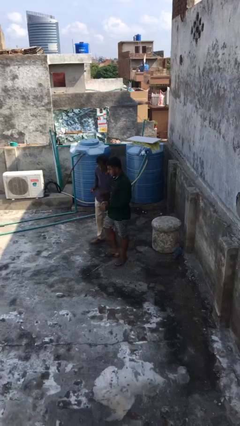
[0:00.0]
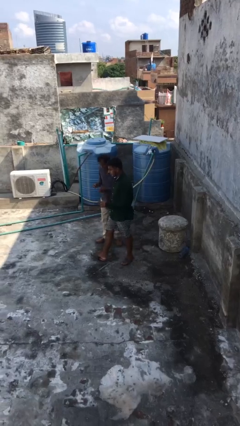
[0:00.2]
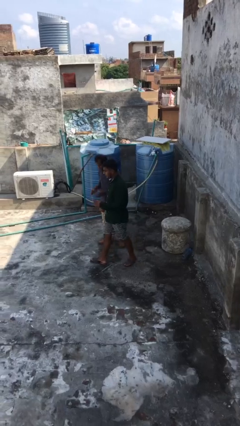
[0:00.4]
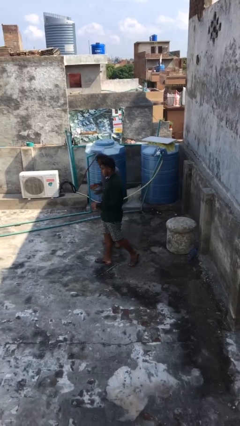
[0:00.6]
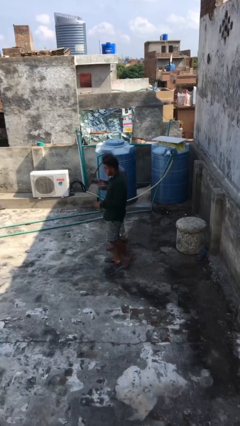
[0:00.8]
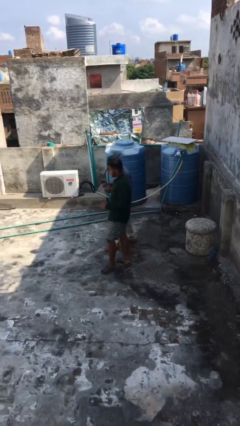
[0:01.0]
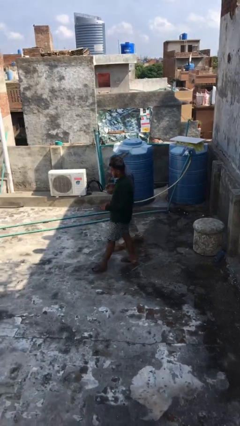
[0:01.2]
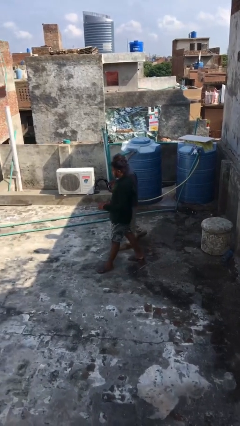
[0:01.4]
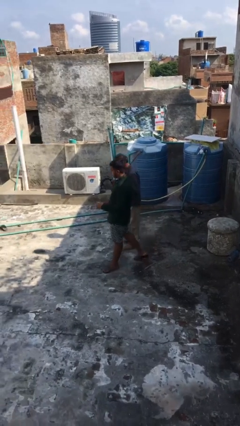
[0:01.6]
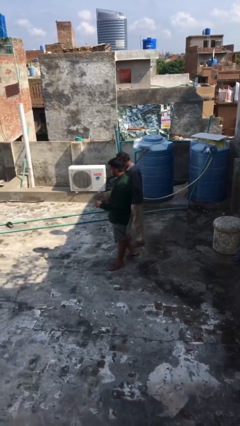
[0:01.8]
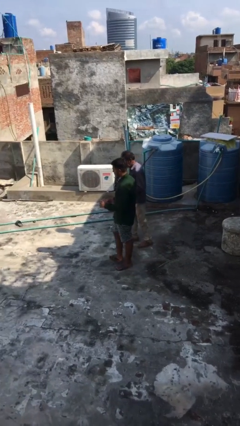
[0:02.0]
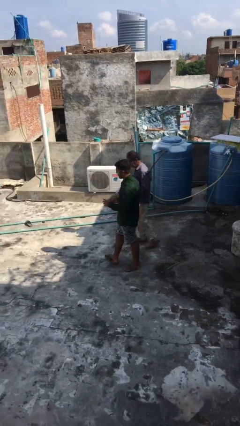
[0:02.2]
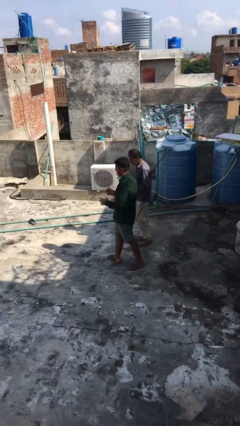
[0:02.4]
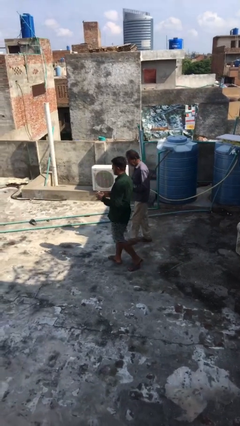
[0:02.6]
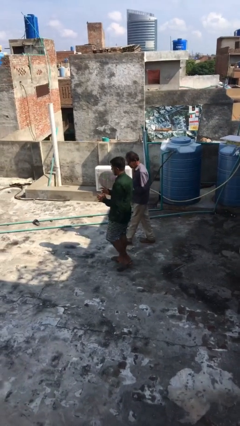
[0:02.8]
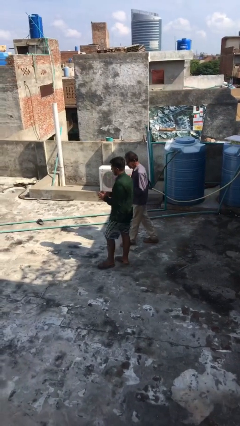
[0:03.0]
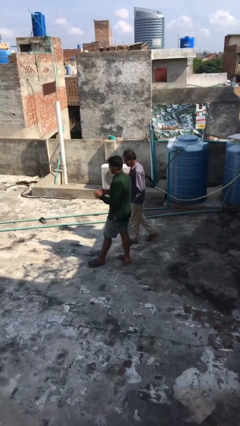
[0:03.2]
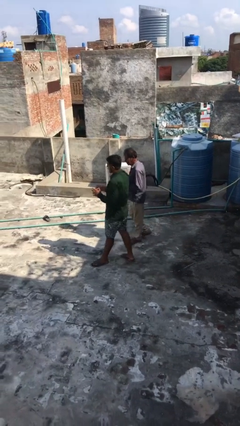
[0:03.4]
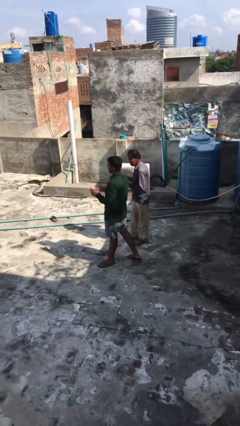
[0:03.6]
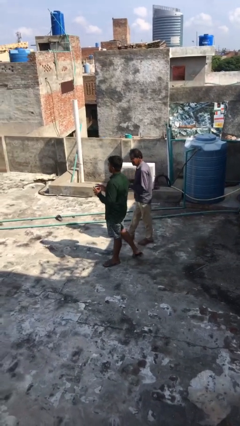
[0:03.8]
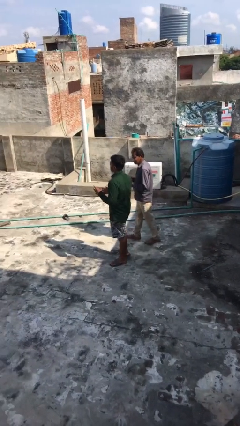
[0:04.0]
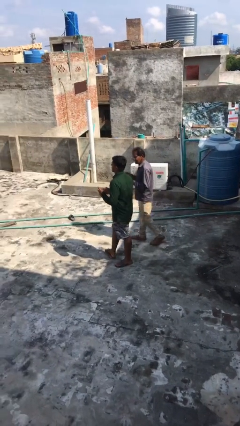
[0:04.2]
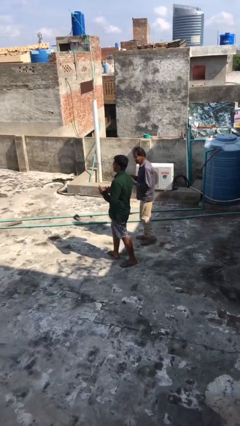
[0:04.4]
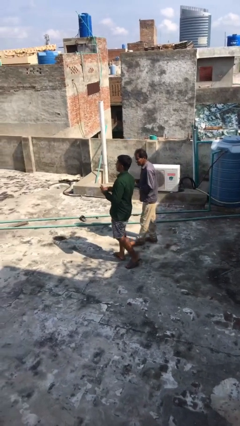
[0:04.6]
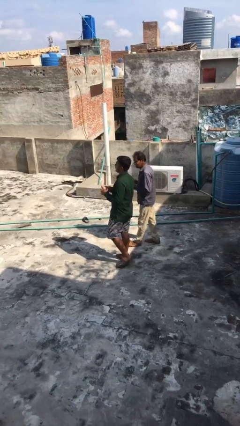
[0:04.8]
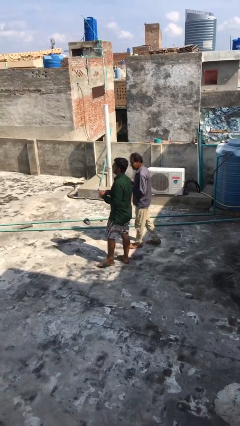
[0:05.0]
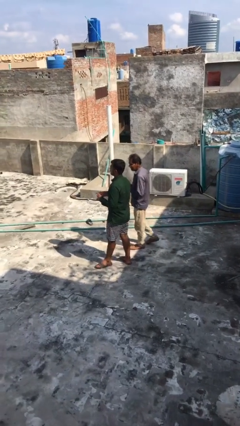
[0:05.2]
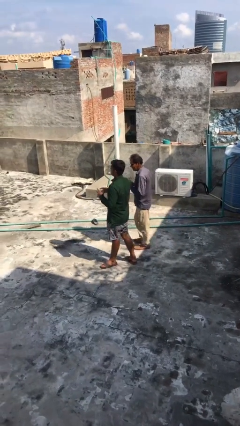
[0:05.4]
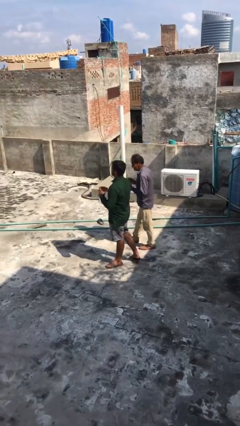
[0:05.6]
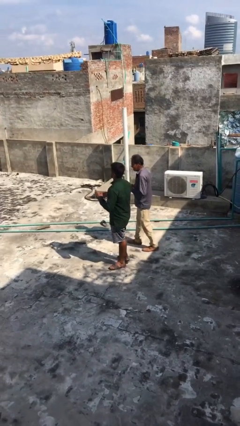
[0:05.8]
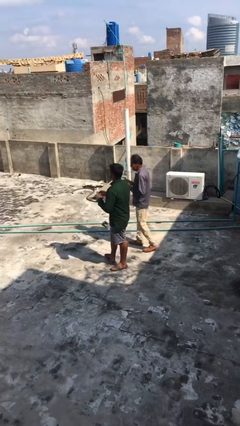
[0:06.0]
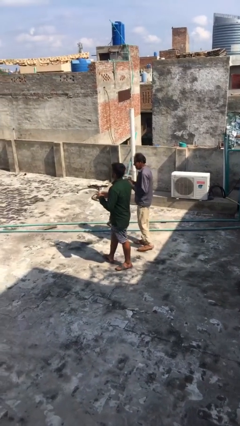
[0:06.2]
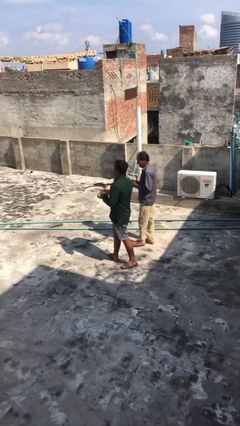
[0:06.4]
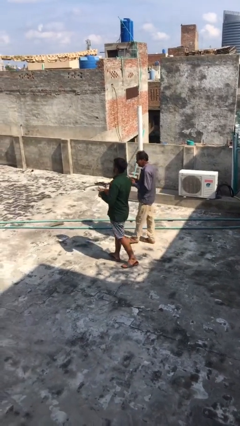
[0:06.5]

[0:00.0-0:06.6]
person talks to person

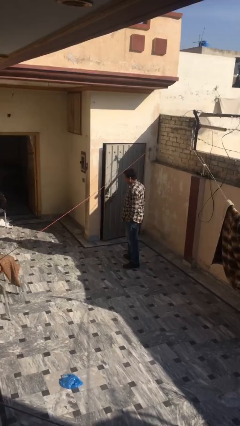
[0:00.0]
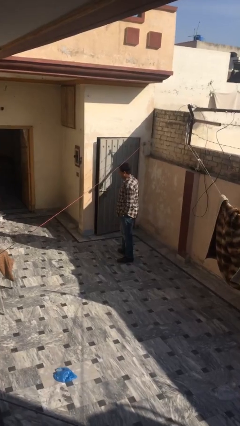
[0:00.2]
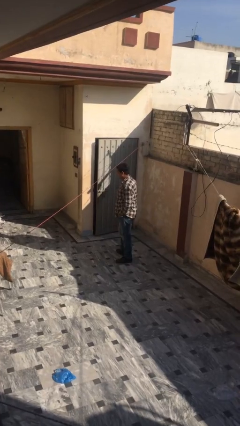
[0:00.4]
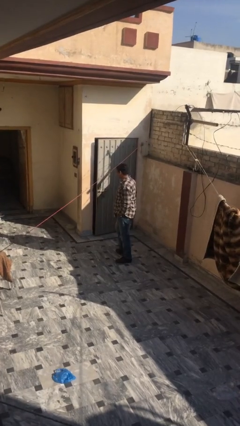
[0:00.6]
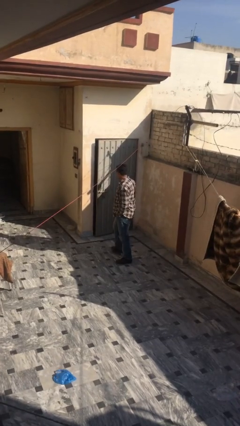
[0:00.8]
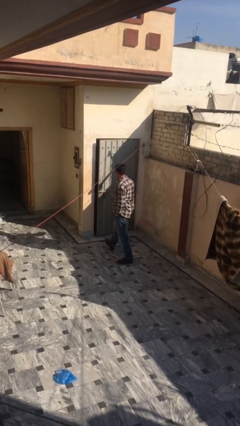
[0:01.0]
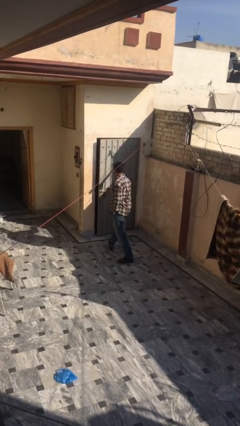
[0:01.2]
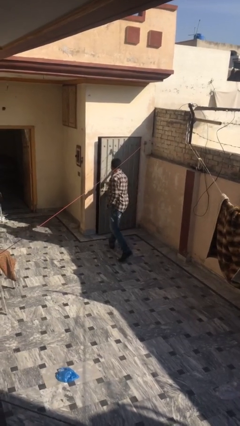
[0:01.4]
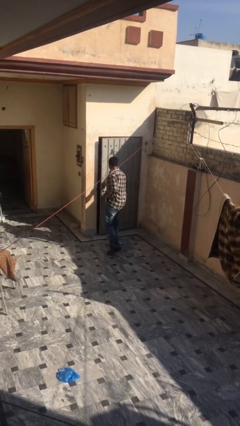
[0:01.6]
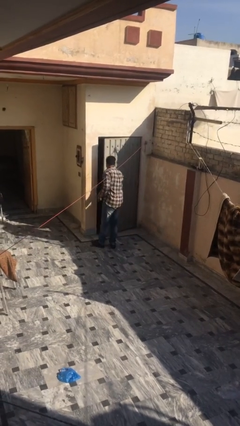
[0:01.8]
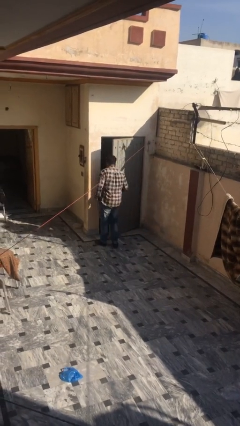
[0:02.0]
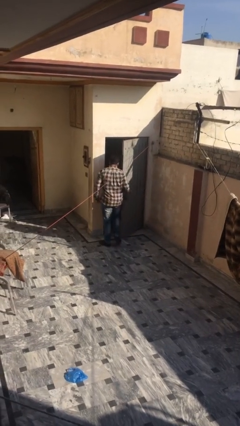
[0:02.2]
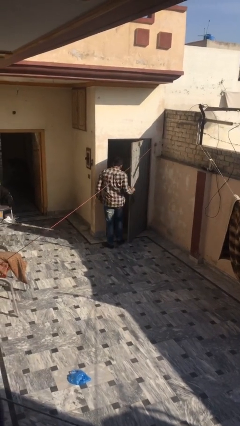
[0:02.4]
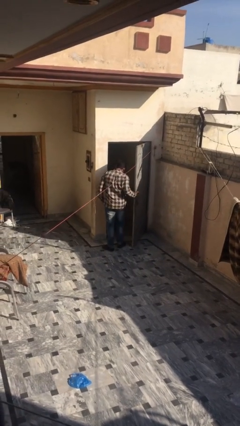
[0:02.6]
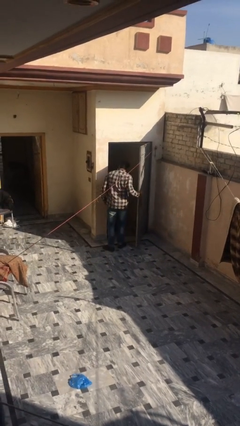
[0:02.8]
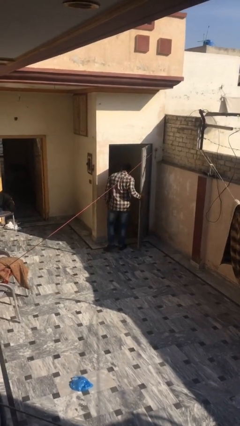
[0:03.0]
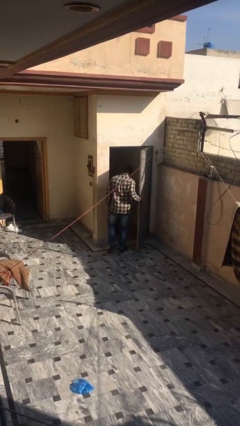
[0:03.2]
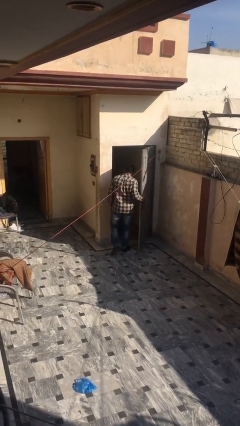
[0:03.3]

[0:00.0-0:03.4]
person opens facility door

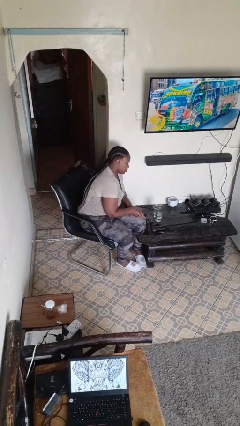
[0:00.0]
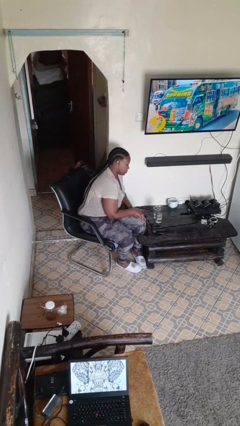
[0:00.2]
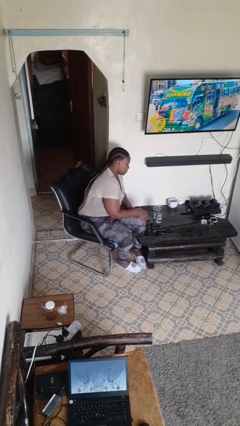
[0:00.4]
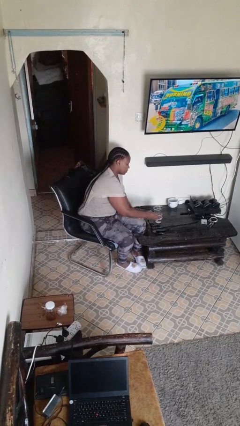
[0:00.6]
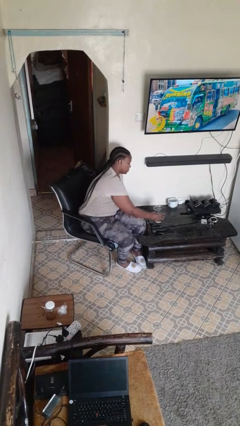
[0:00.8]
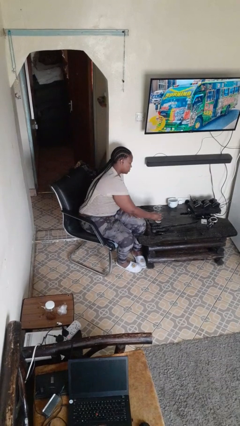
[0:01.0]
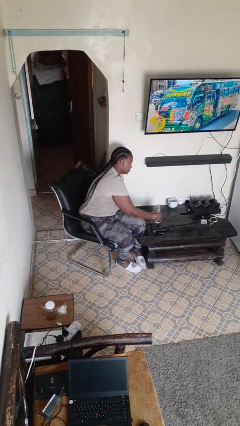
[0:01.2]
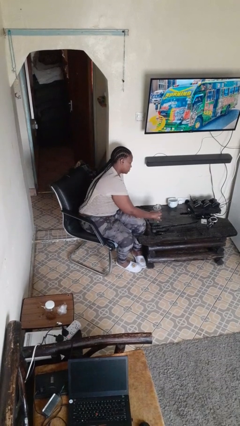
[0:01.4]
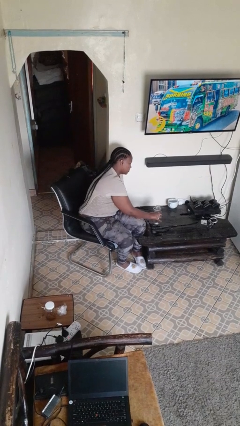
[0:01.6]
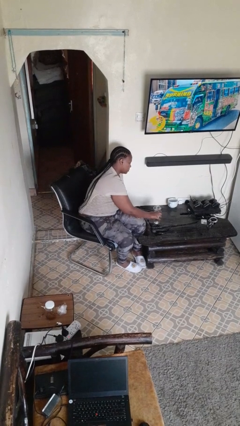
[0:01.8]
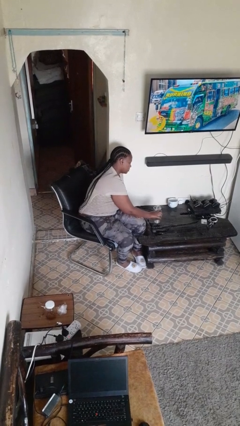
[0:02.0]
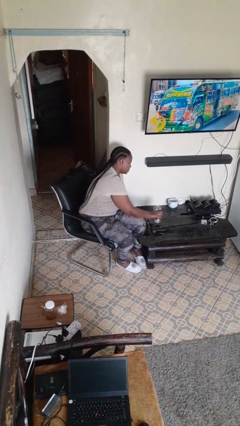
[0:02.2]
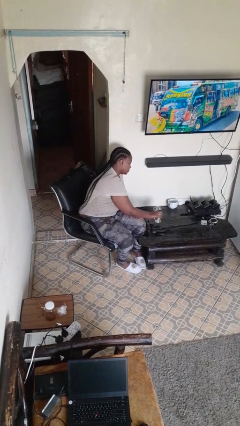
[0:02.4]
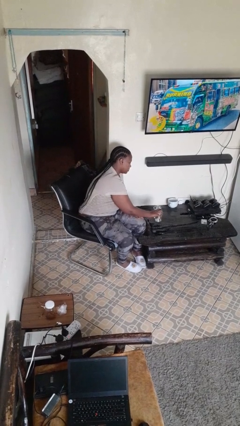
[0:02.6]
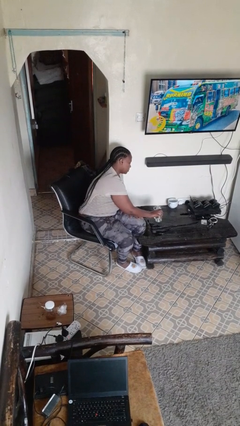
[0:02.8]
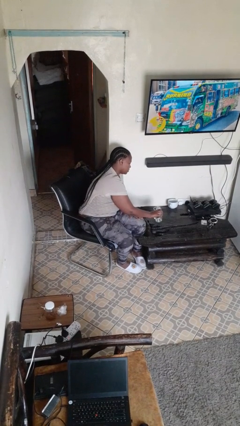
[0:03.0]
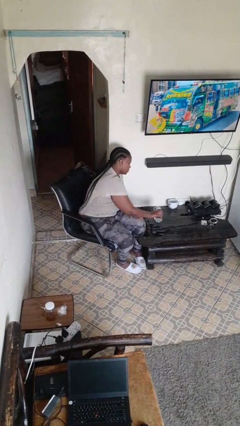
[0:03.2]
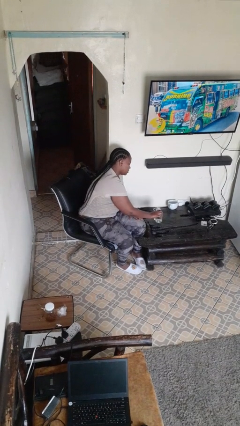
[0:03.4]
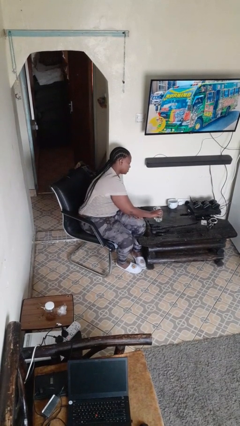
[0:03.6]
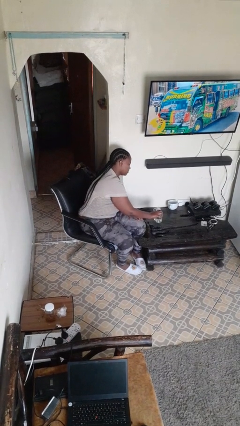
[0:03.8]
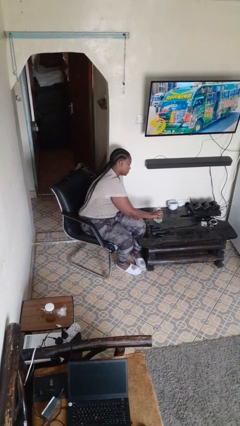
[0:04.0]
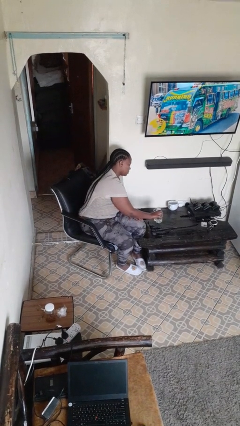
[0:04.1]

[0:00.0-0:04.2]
person pours liquid into cup

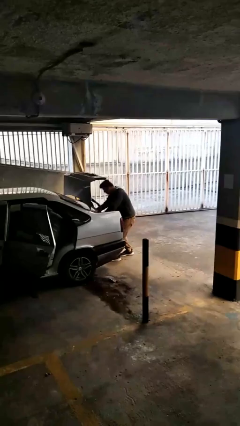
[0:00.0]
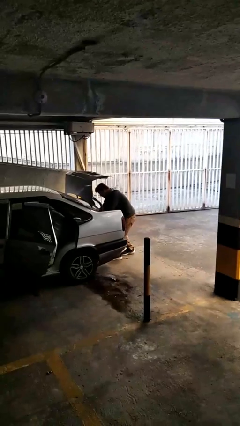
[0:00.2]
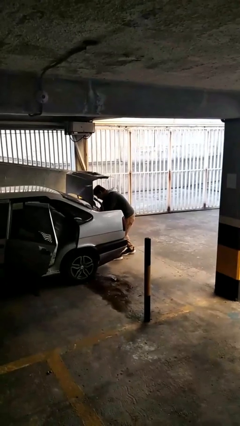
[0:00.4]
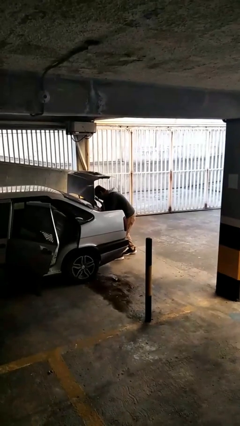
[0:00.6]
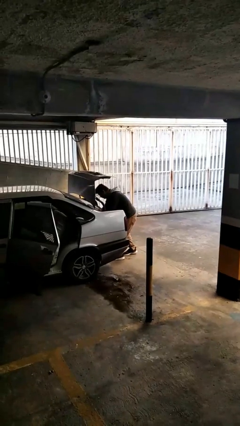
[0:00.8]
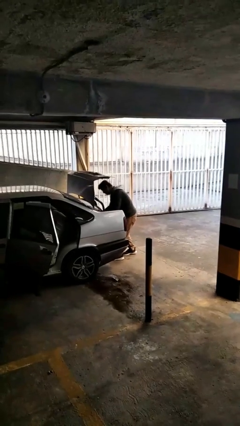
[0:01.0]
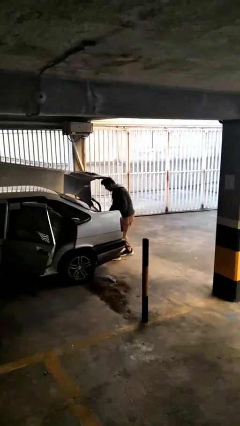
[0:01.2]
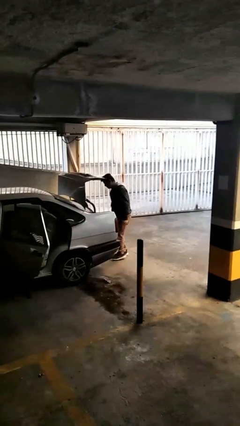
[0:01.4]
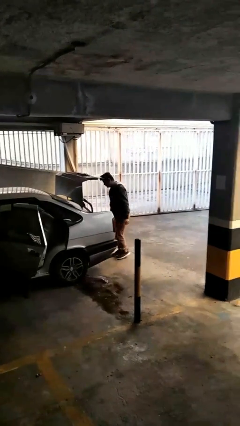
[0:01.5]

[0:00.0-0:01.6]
person loads car

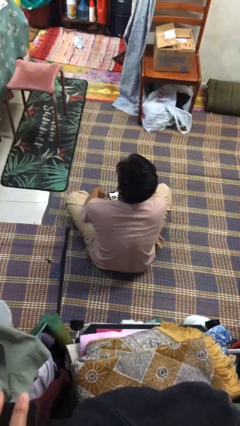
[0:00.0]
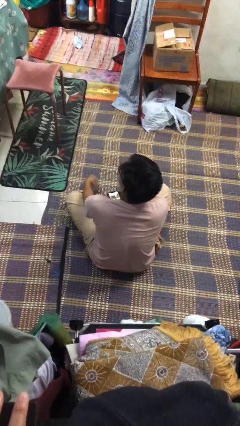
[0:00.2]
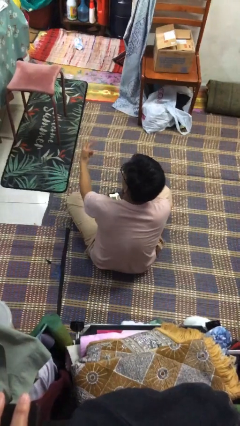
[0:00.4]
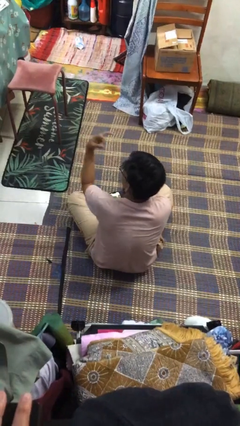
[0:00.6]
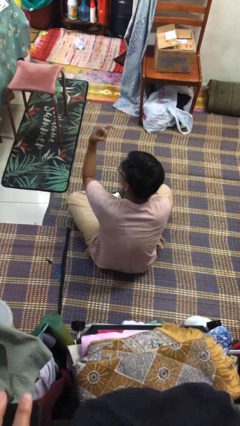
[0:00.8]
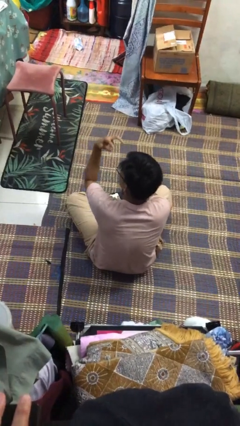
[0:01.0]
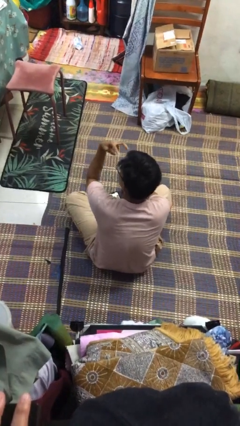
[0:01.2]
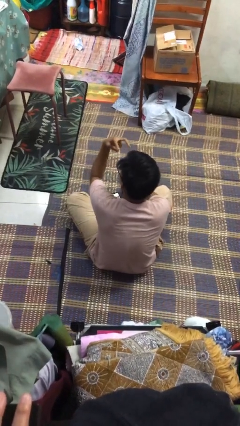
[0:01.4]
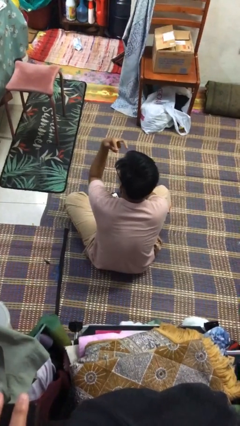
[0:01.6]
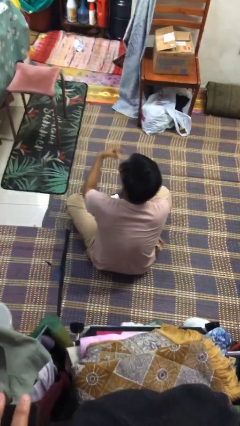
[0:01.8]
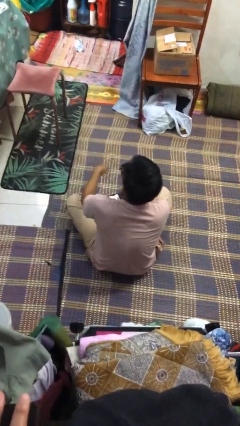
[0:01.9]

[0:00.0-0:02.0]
person gestures watch closely
